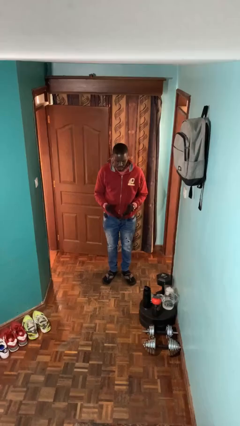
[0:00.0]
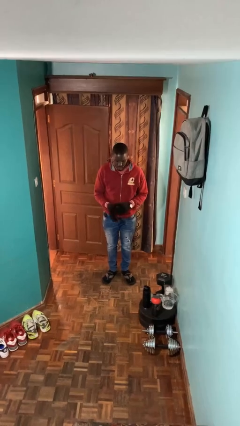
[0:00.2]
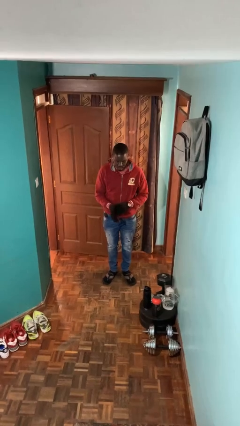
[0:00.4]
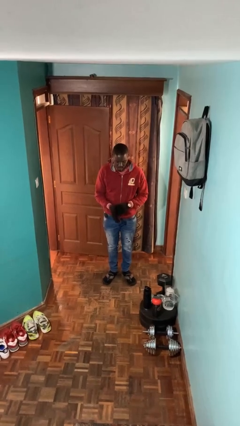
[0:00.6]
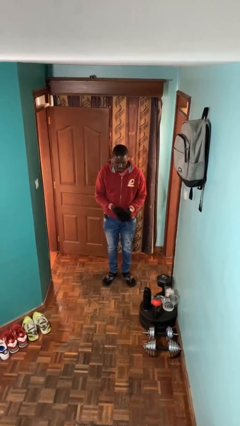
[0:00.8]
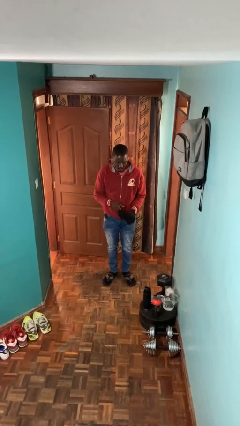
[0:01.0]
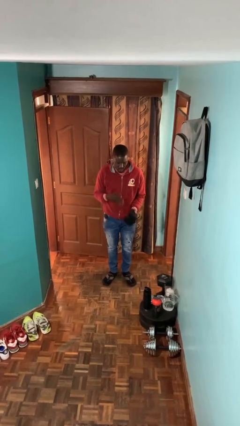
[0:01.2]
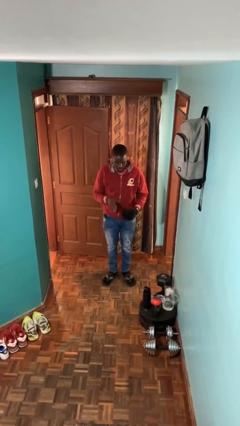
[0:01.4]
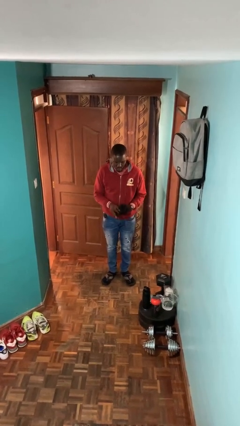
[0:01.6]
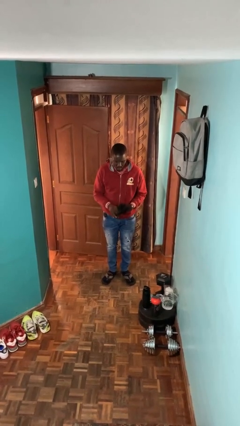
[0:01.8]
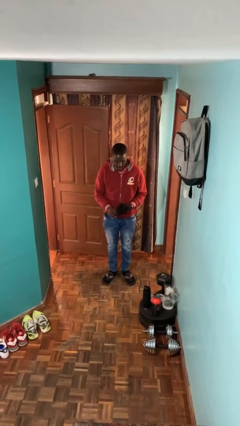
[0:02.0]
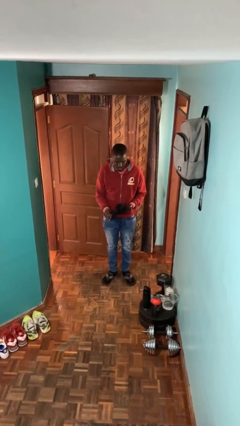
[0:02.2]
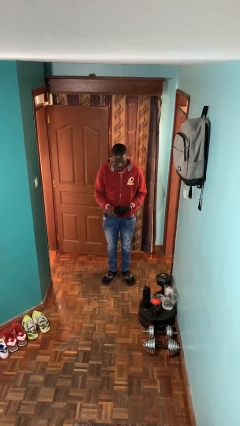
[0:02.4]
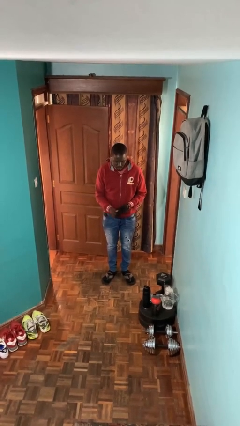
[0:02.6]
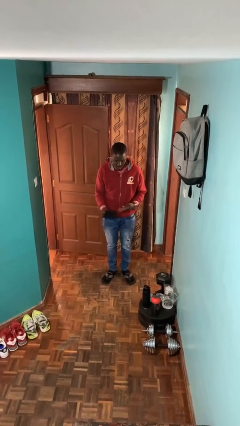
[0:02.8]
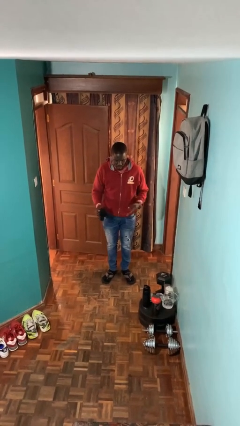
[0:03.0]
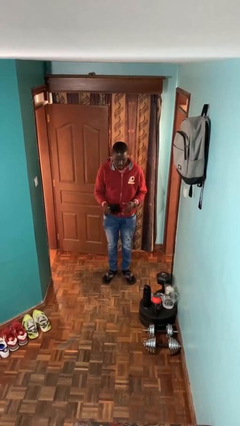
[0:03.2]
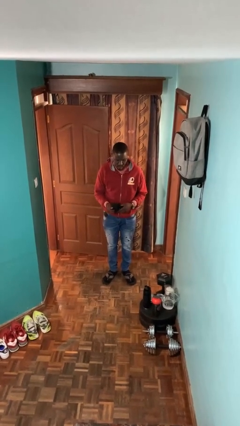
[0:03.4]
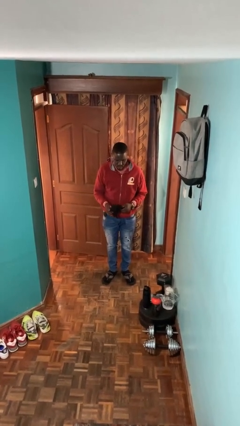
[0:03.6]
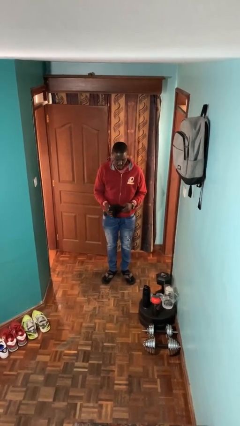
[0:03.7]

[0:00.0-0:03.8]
person takes off gloves

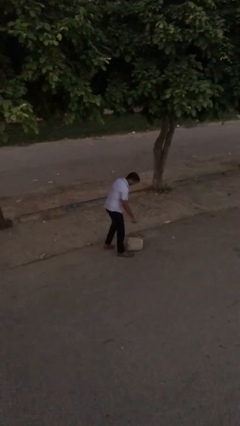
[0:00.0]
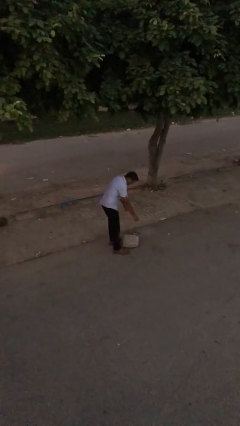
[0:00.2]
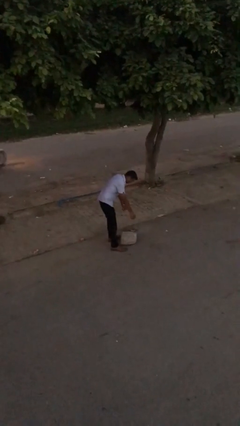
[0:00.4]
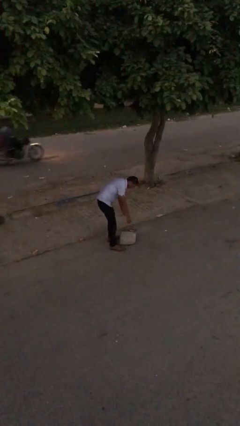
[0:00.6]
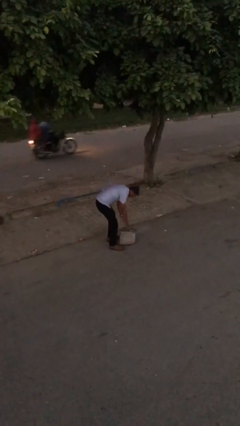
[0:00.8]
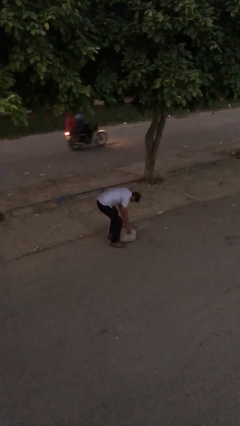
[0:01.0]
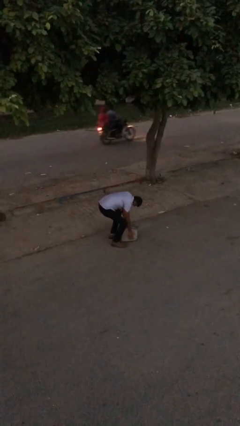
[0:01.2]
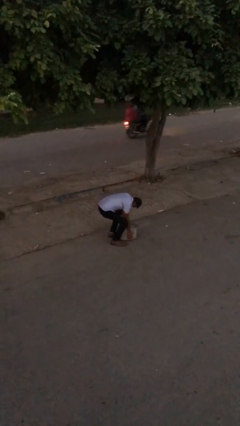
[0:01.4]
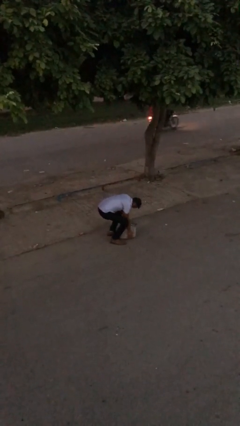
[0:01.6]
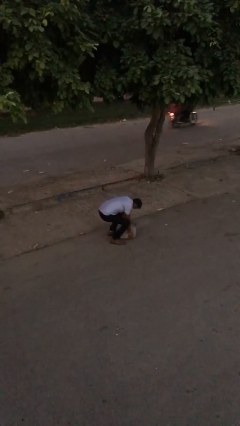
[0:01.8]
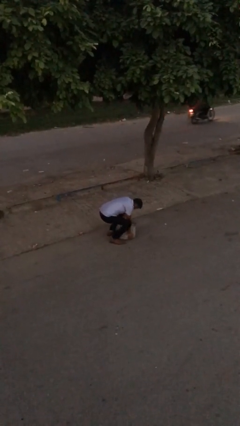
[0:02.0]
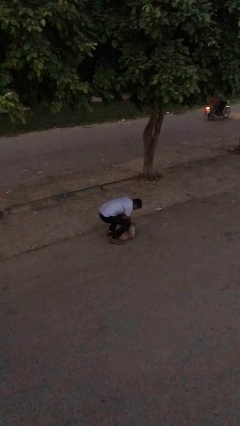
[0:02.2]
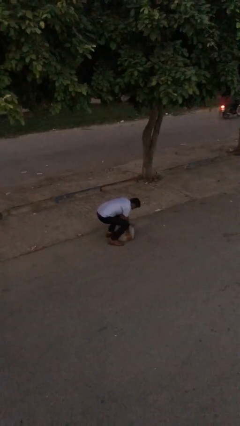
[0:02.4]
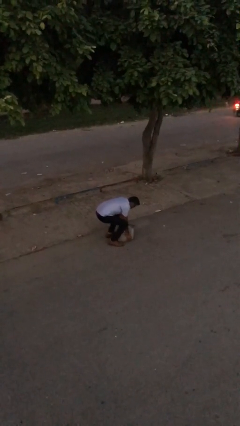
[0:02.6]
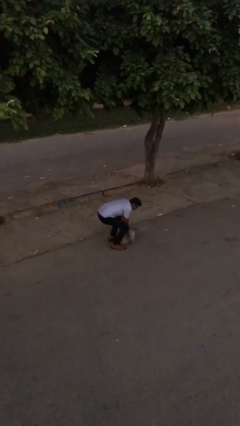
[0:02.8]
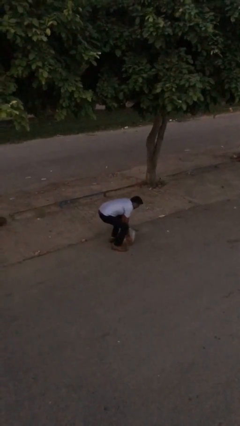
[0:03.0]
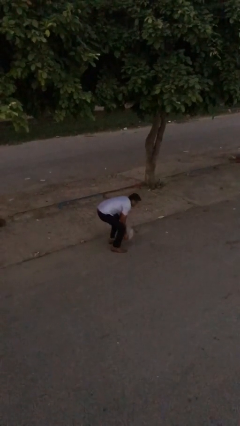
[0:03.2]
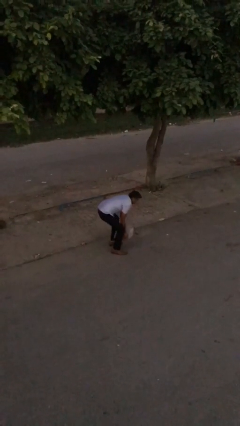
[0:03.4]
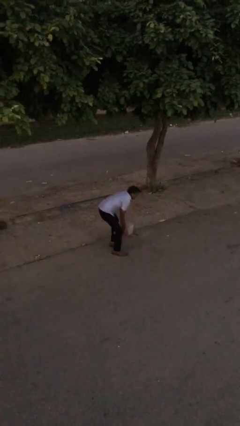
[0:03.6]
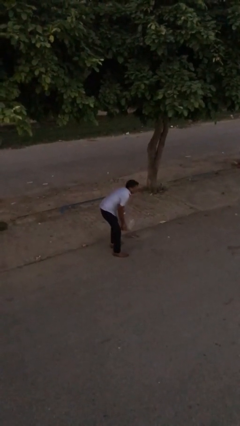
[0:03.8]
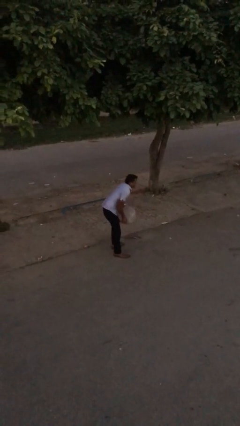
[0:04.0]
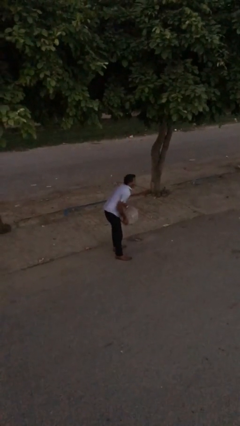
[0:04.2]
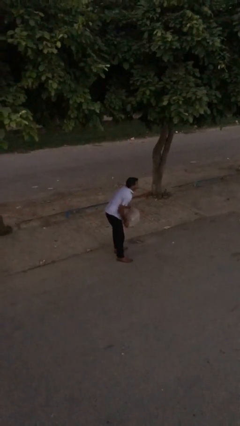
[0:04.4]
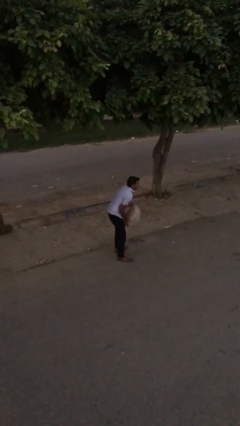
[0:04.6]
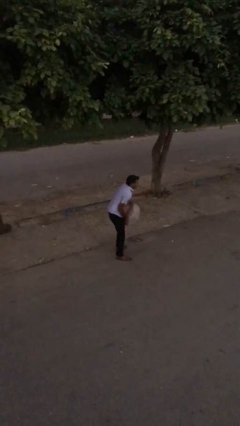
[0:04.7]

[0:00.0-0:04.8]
person picks up object from floor

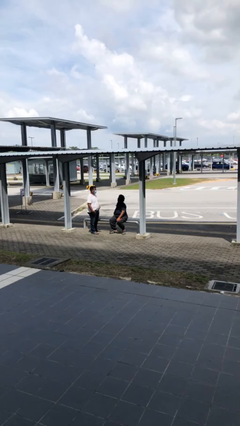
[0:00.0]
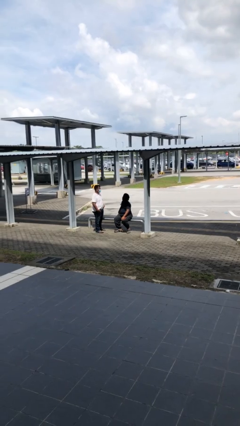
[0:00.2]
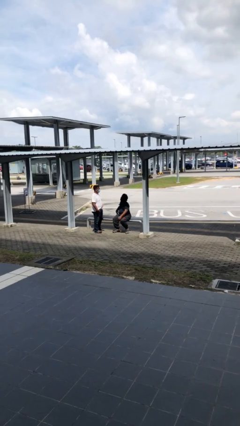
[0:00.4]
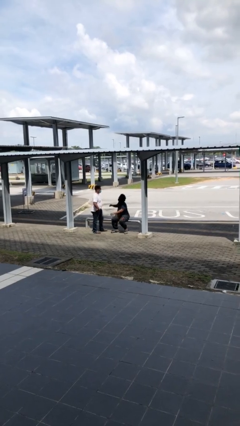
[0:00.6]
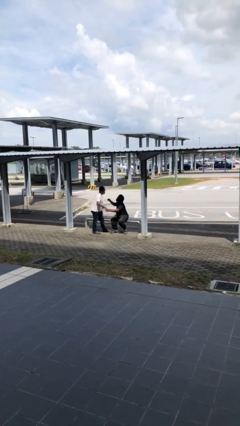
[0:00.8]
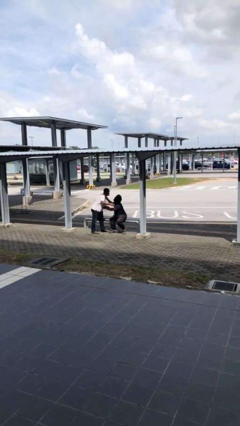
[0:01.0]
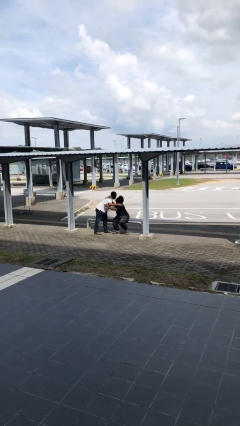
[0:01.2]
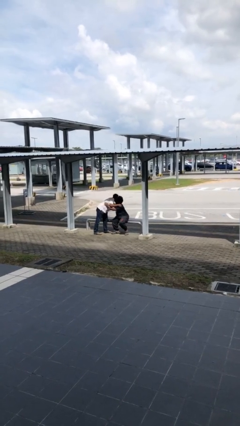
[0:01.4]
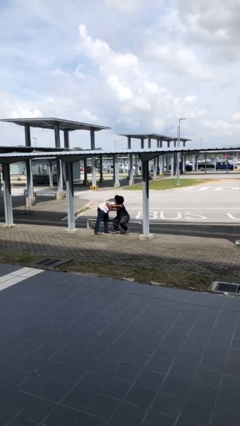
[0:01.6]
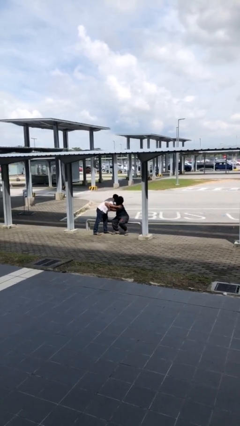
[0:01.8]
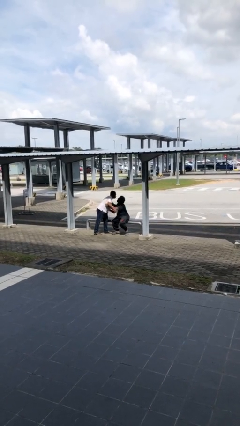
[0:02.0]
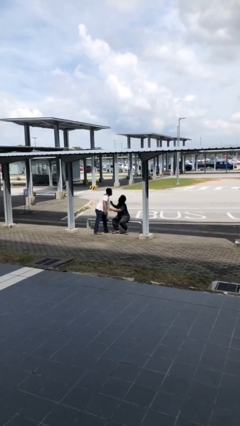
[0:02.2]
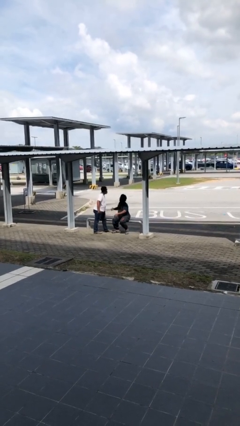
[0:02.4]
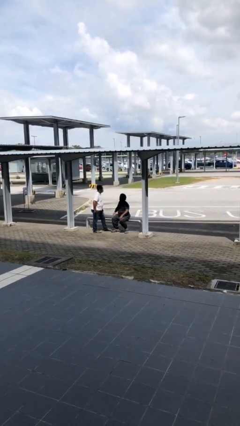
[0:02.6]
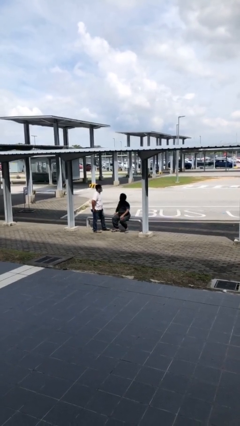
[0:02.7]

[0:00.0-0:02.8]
person embraces person

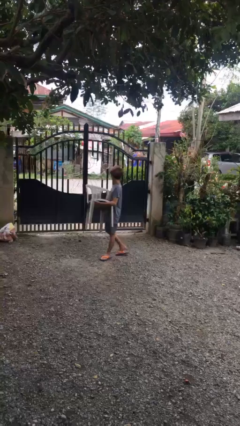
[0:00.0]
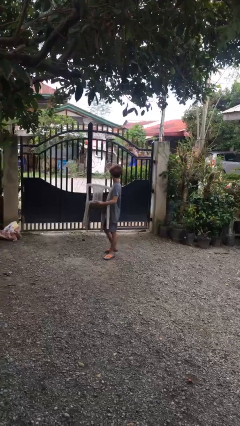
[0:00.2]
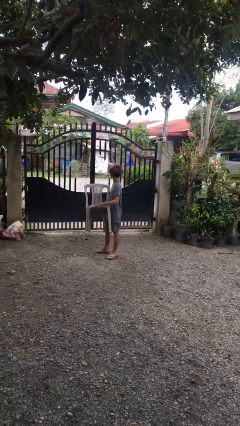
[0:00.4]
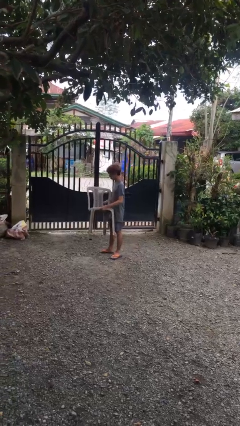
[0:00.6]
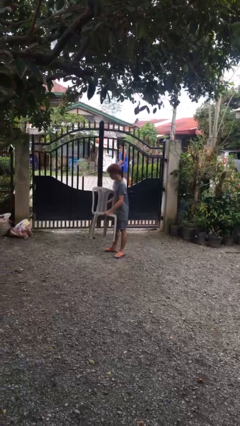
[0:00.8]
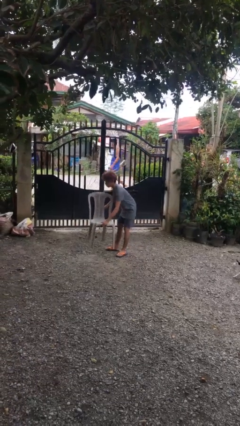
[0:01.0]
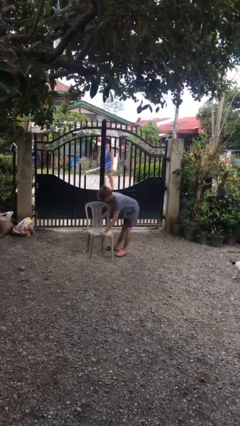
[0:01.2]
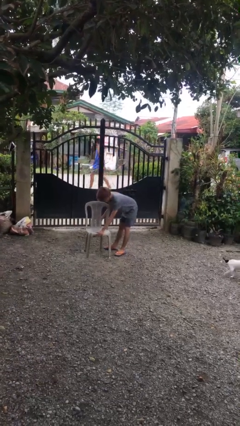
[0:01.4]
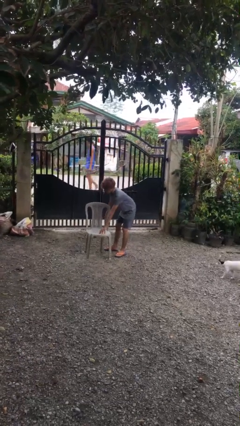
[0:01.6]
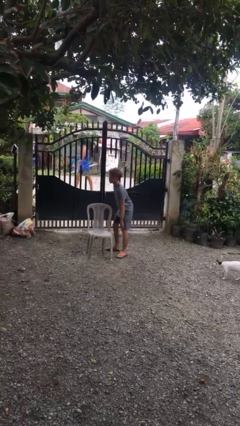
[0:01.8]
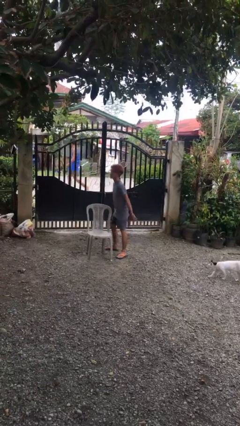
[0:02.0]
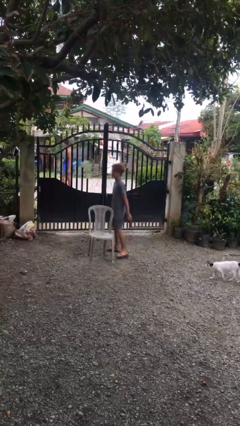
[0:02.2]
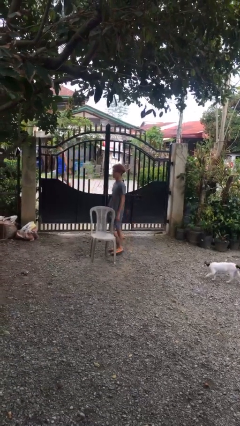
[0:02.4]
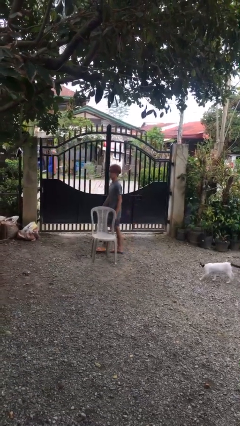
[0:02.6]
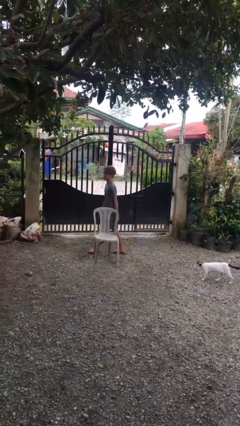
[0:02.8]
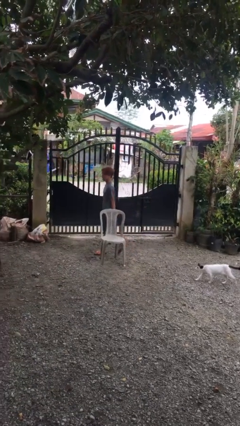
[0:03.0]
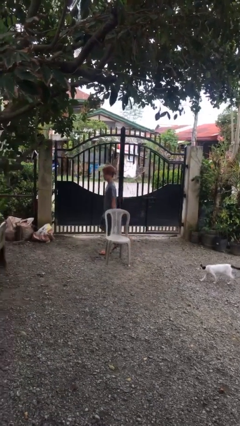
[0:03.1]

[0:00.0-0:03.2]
person puts down object on floor

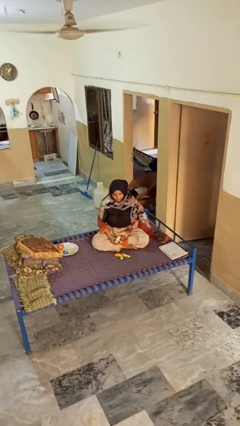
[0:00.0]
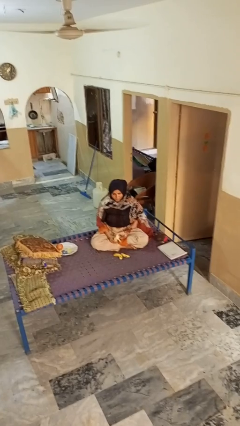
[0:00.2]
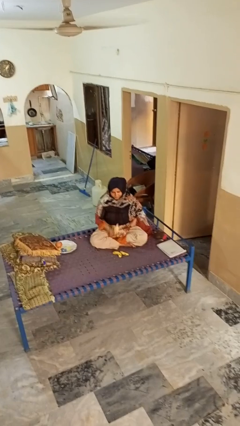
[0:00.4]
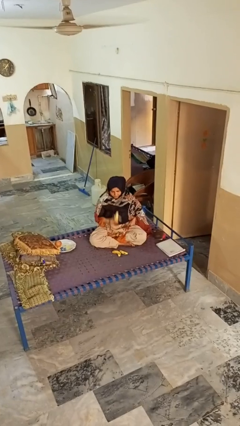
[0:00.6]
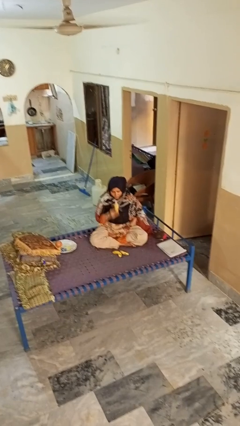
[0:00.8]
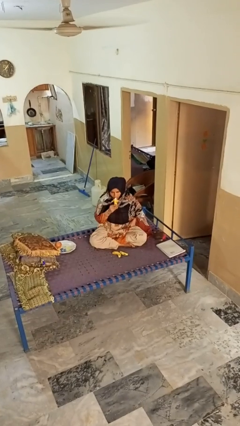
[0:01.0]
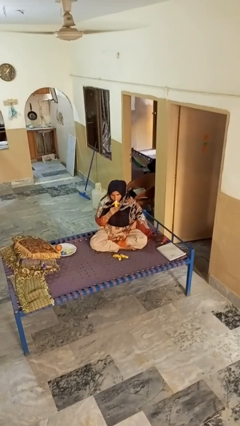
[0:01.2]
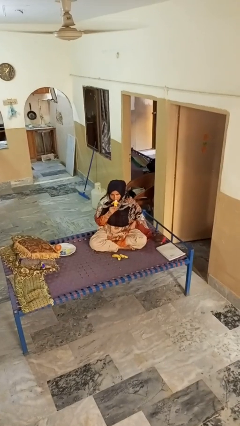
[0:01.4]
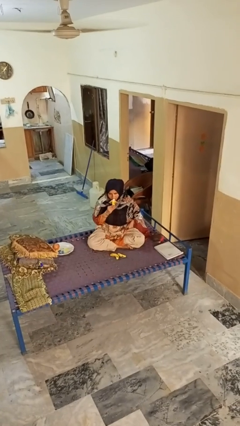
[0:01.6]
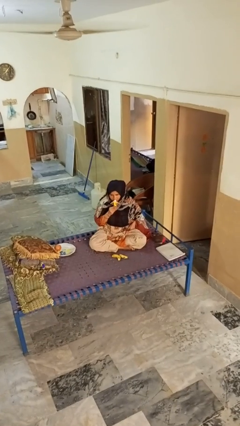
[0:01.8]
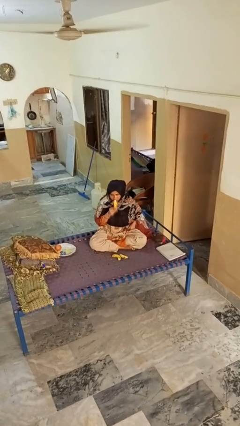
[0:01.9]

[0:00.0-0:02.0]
person eats banana

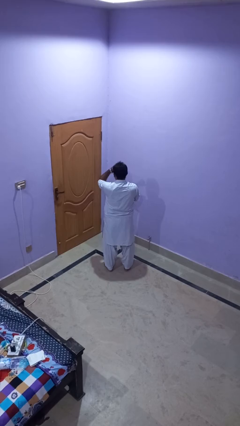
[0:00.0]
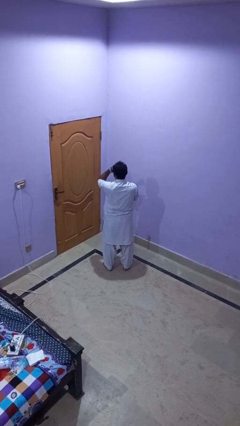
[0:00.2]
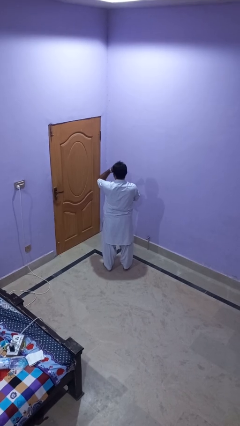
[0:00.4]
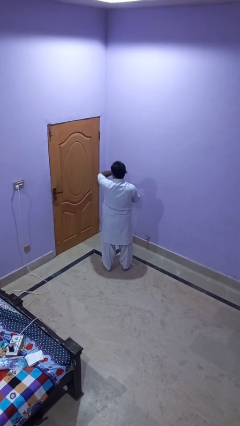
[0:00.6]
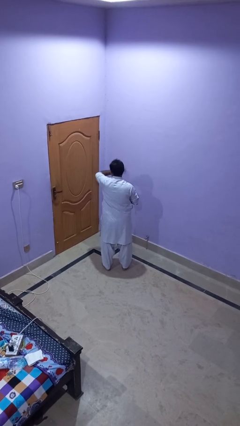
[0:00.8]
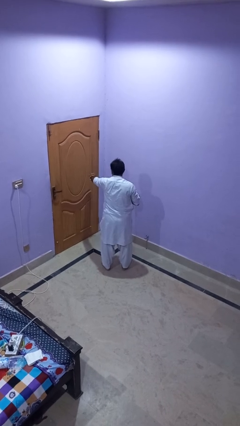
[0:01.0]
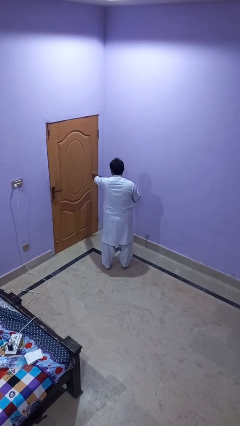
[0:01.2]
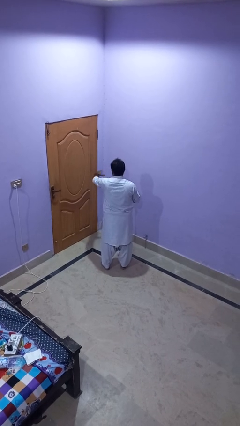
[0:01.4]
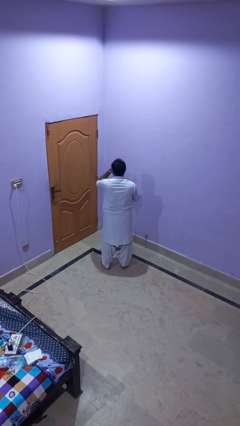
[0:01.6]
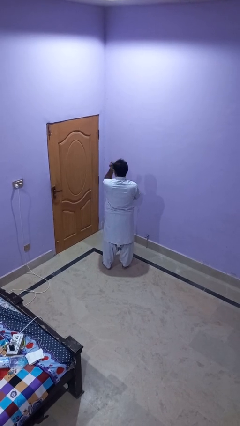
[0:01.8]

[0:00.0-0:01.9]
person karate chop
